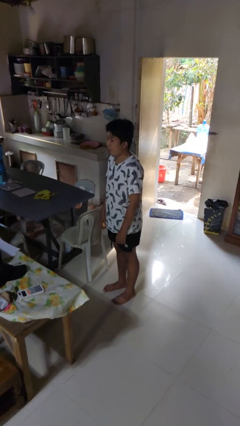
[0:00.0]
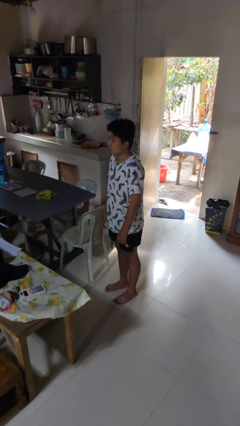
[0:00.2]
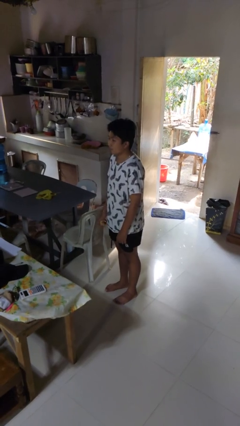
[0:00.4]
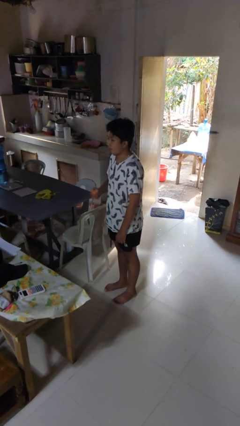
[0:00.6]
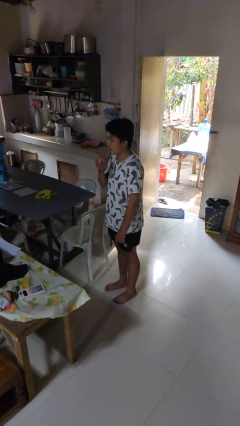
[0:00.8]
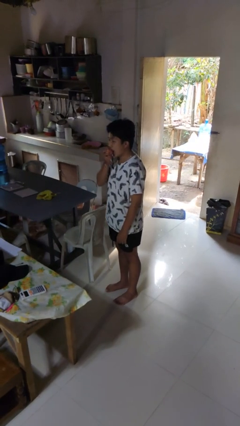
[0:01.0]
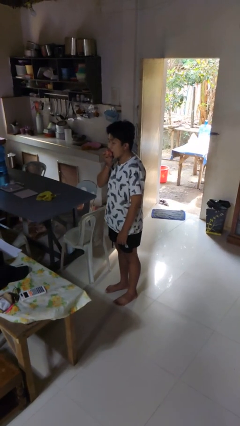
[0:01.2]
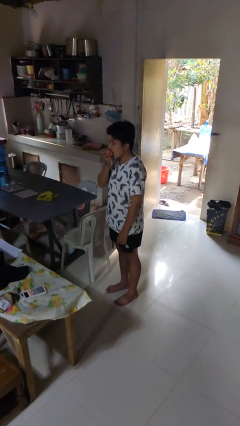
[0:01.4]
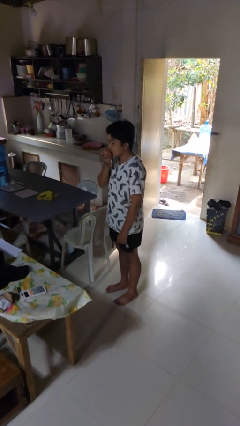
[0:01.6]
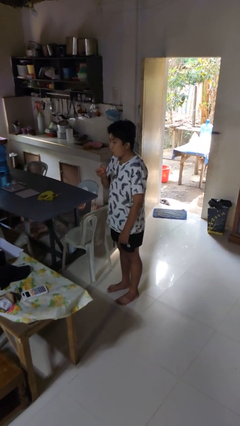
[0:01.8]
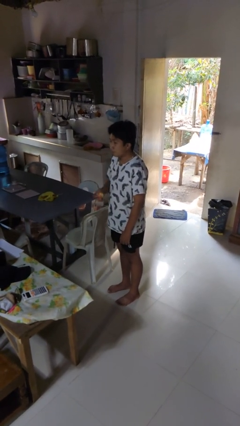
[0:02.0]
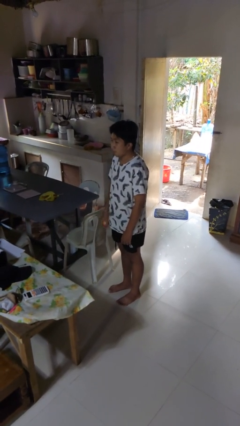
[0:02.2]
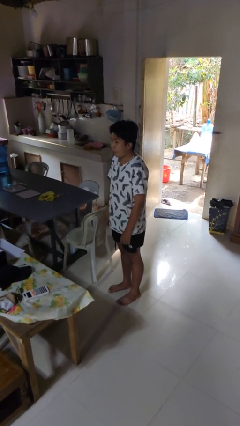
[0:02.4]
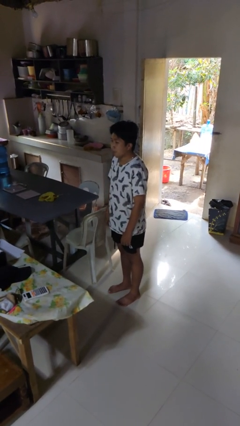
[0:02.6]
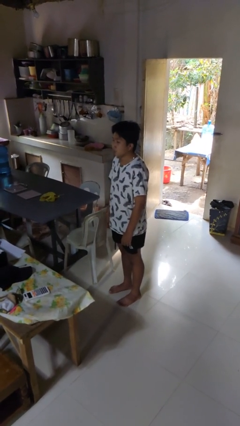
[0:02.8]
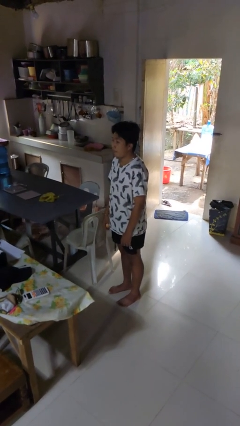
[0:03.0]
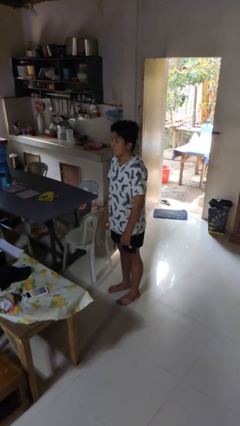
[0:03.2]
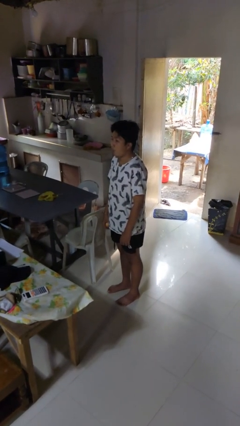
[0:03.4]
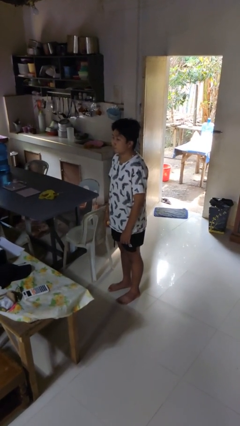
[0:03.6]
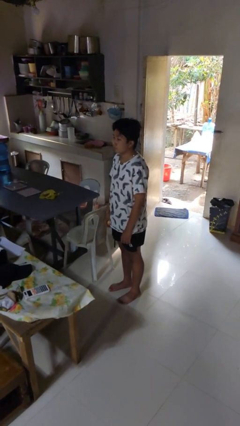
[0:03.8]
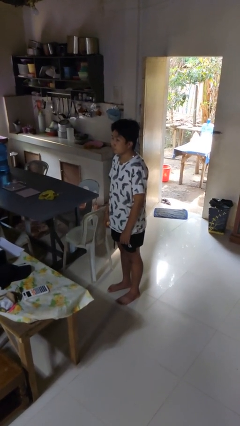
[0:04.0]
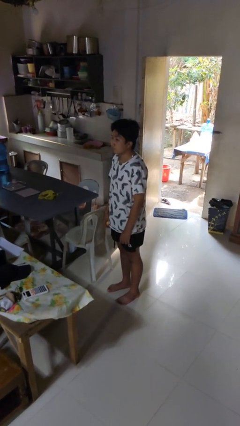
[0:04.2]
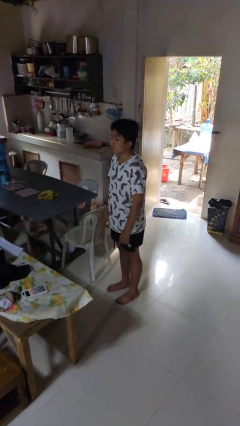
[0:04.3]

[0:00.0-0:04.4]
person eats apple

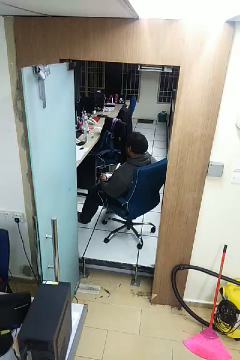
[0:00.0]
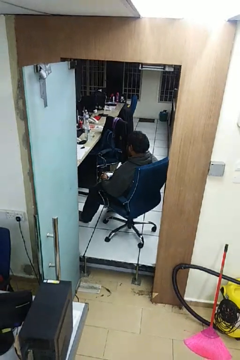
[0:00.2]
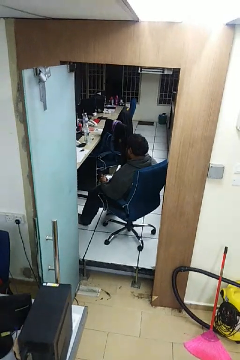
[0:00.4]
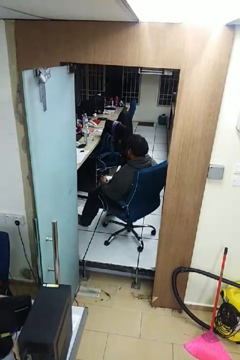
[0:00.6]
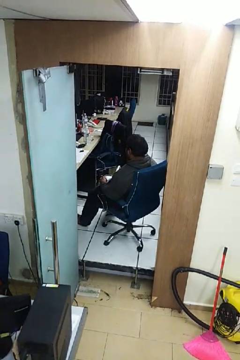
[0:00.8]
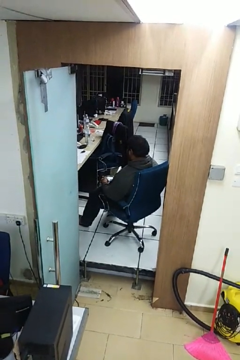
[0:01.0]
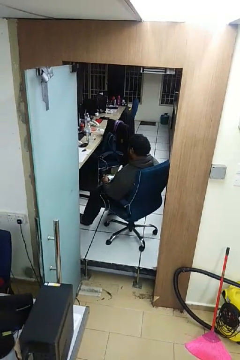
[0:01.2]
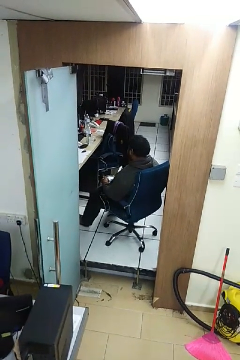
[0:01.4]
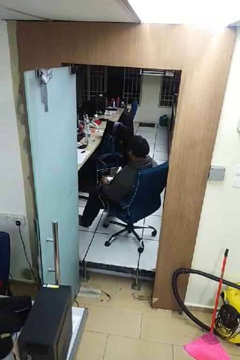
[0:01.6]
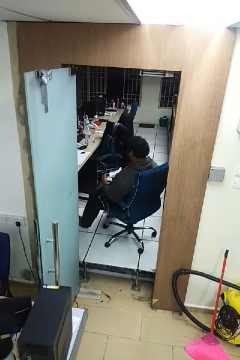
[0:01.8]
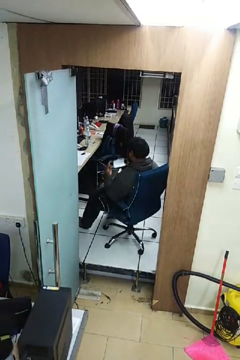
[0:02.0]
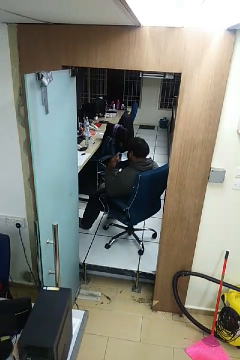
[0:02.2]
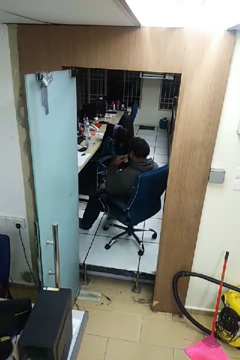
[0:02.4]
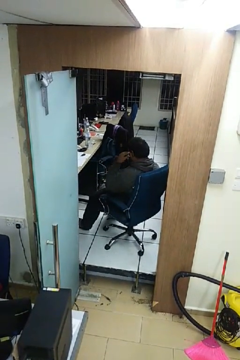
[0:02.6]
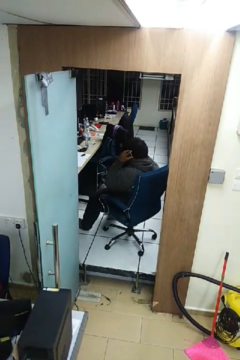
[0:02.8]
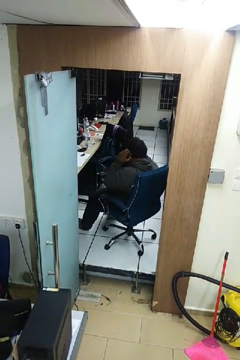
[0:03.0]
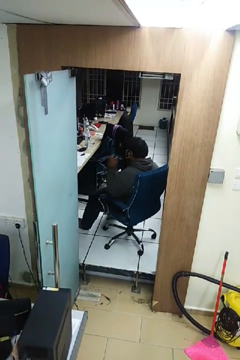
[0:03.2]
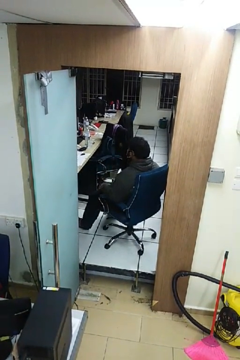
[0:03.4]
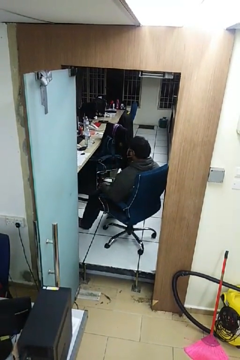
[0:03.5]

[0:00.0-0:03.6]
person puts on facemask

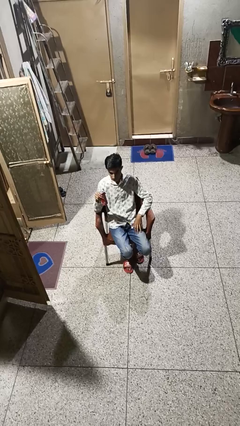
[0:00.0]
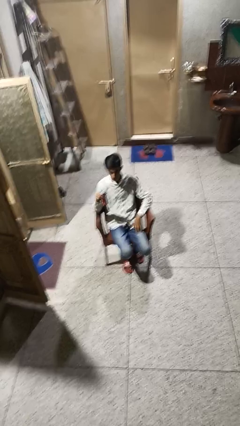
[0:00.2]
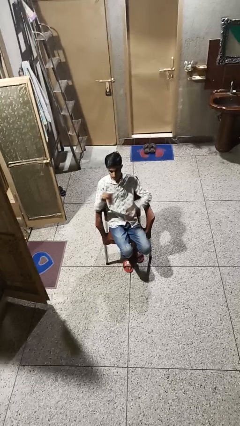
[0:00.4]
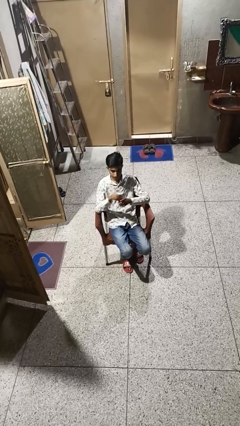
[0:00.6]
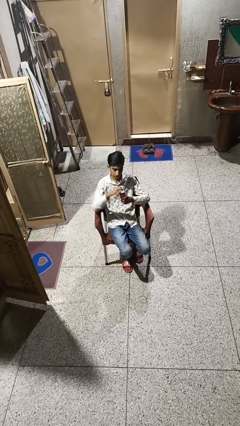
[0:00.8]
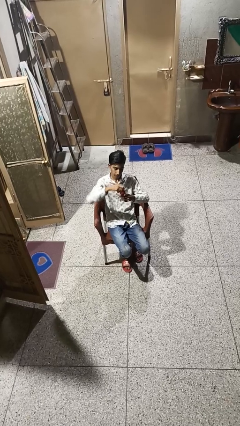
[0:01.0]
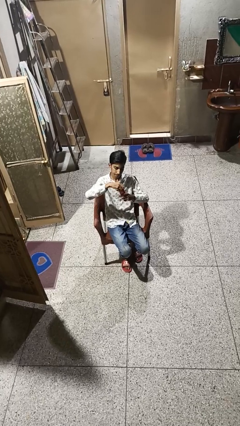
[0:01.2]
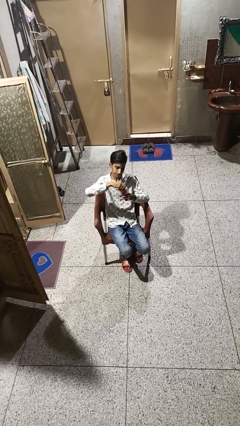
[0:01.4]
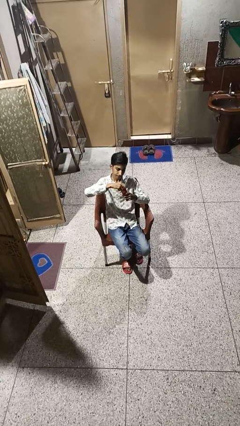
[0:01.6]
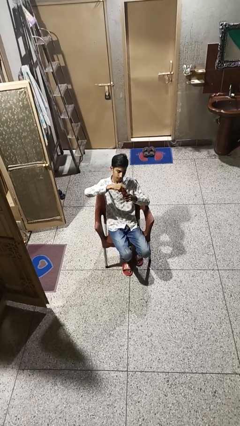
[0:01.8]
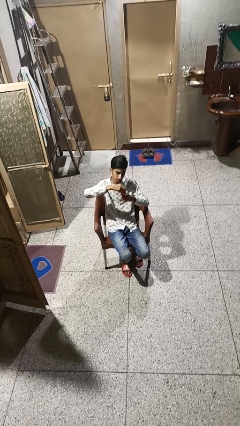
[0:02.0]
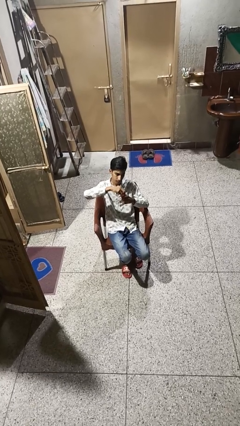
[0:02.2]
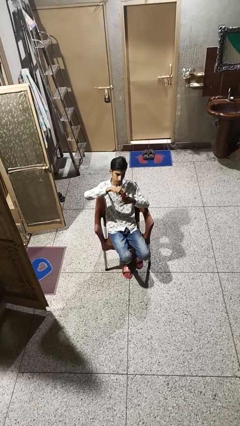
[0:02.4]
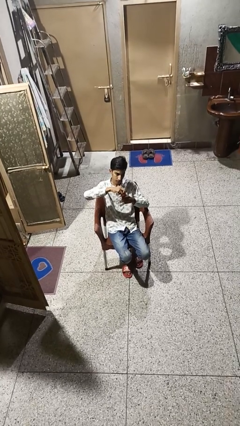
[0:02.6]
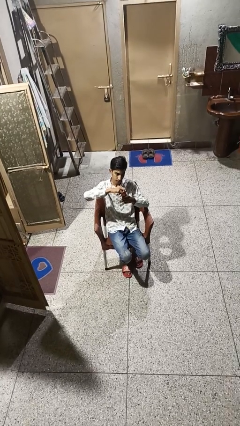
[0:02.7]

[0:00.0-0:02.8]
person opens beverage can

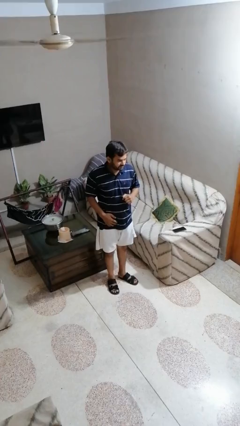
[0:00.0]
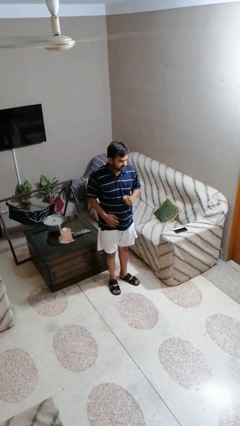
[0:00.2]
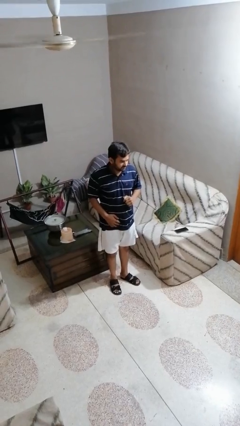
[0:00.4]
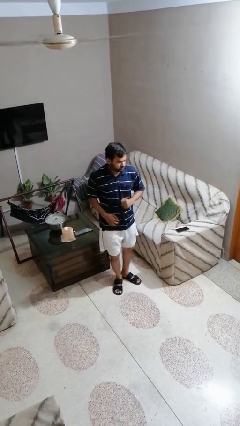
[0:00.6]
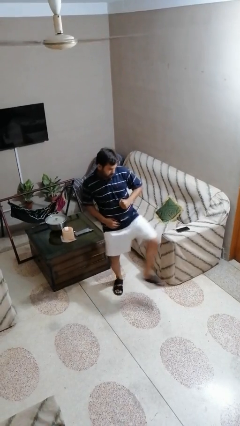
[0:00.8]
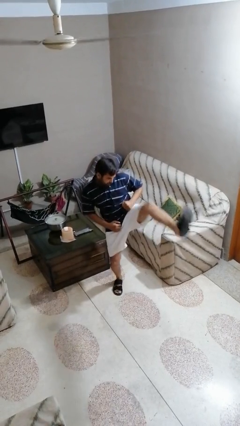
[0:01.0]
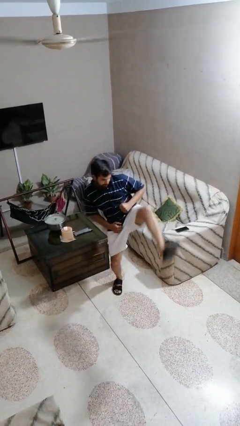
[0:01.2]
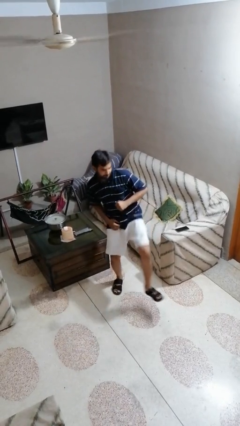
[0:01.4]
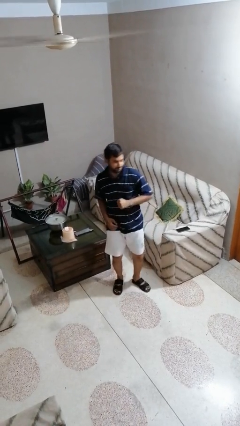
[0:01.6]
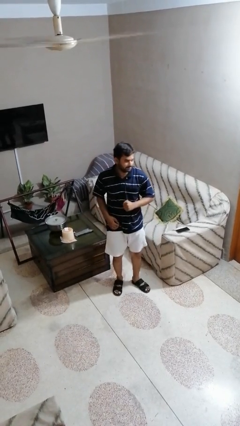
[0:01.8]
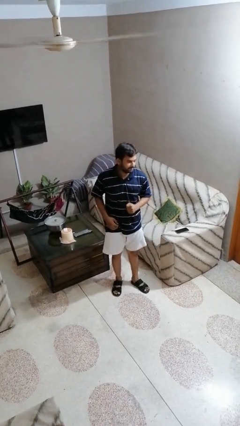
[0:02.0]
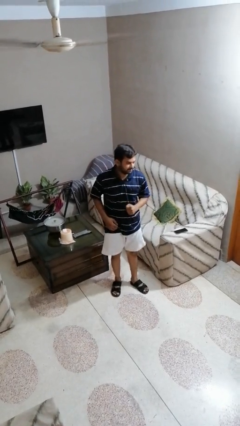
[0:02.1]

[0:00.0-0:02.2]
person karate kicks

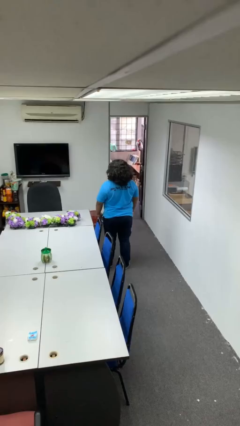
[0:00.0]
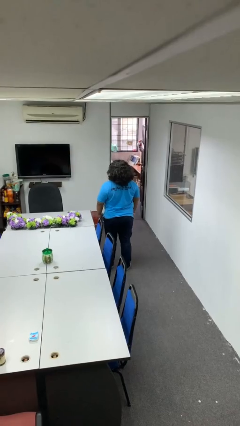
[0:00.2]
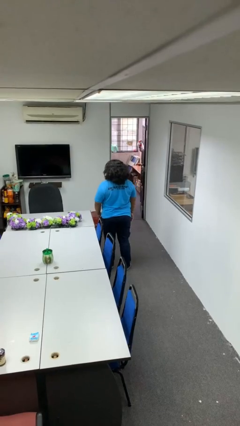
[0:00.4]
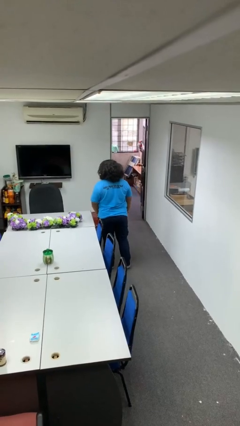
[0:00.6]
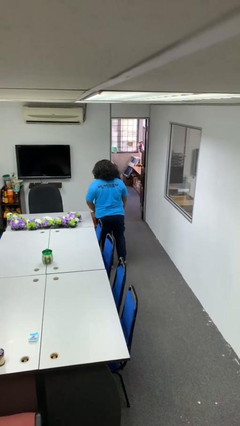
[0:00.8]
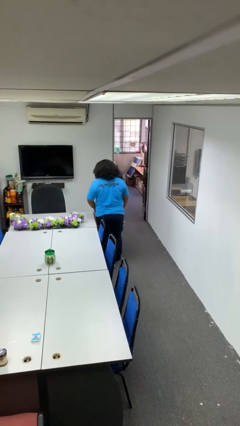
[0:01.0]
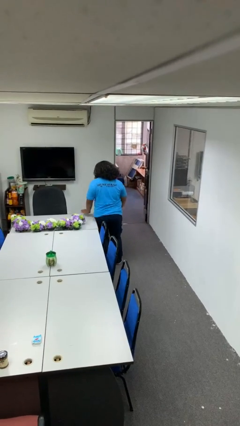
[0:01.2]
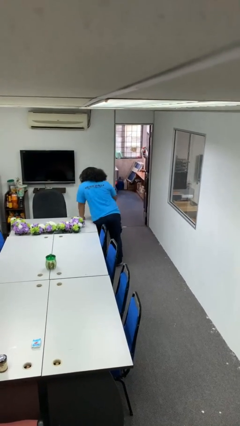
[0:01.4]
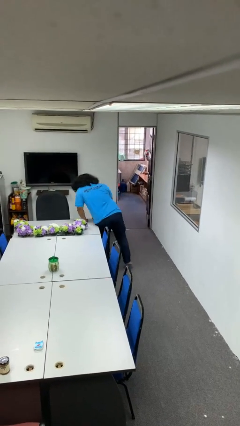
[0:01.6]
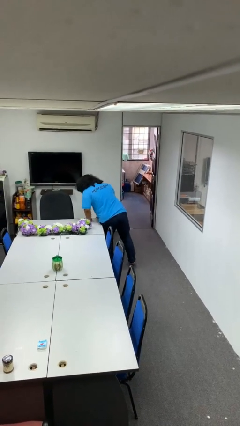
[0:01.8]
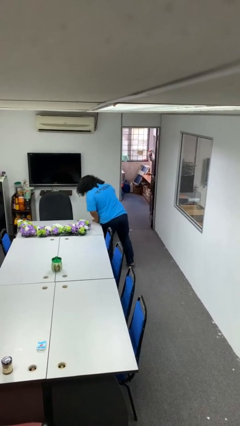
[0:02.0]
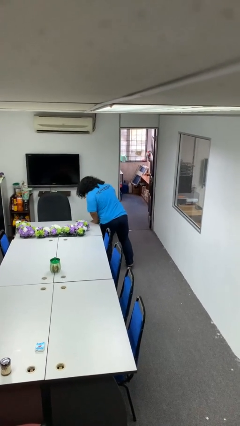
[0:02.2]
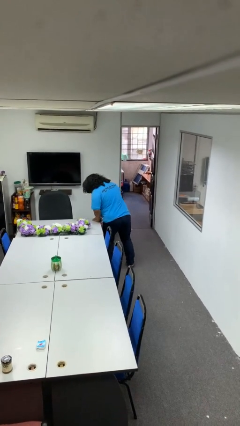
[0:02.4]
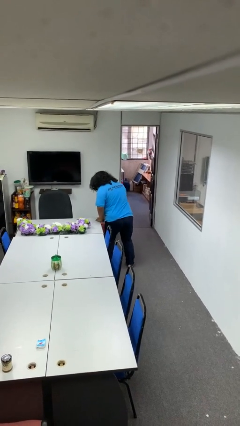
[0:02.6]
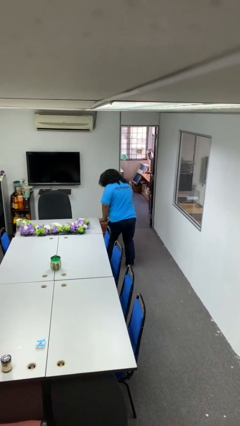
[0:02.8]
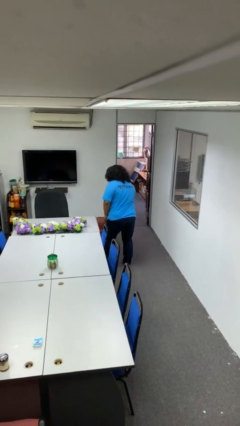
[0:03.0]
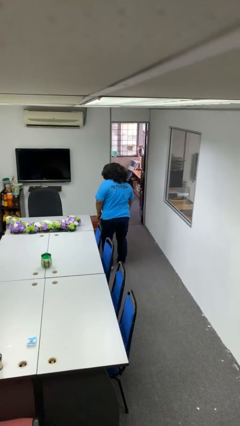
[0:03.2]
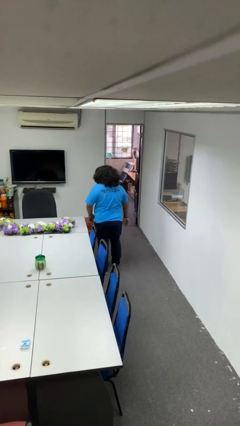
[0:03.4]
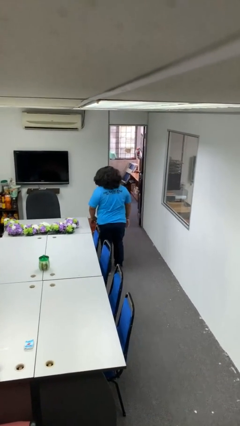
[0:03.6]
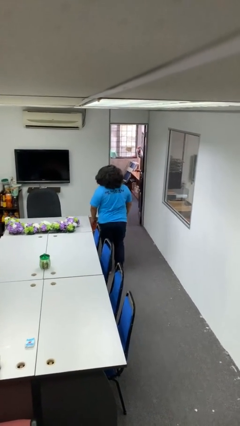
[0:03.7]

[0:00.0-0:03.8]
person bumps into table

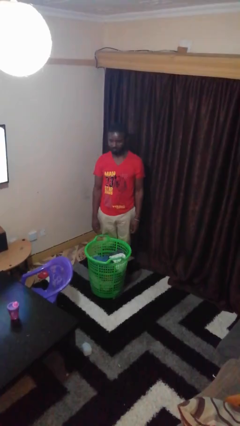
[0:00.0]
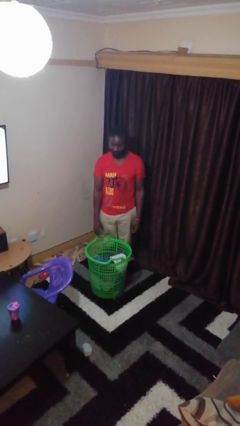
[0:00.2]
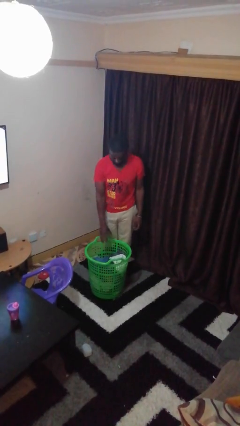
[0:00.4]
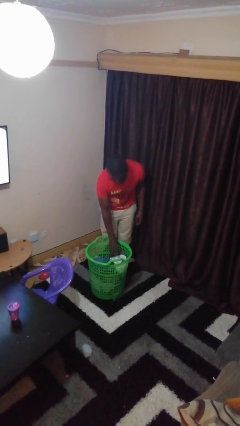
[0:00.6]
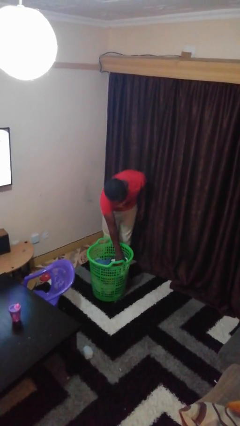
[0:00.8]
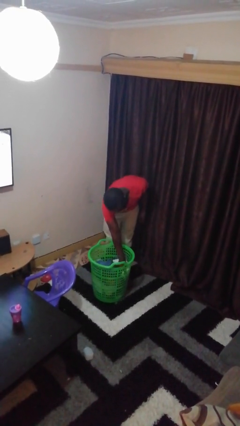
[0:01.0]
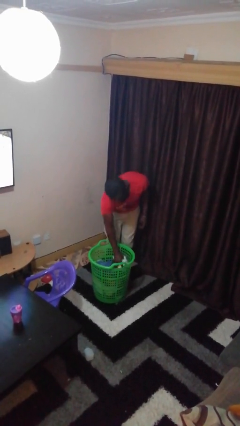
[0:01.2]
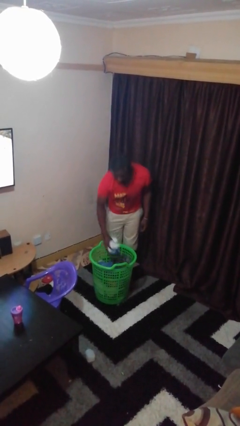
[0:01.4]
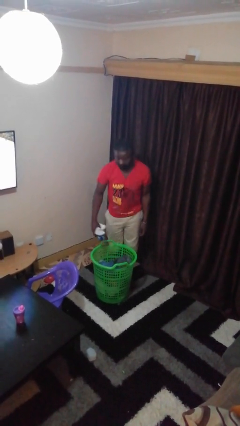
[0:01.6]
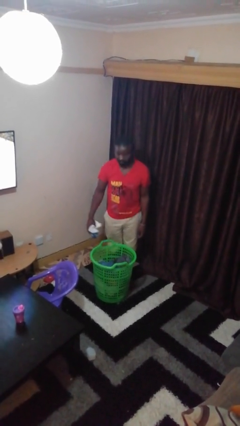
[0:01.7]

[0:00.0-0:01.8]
person takes object from basket
